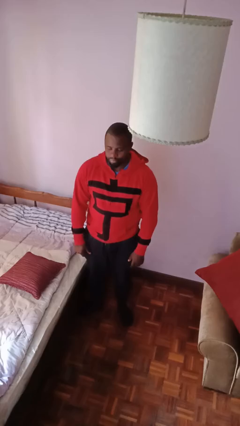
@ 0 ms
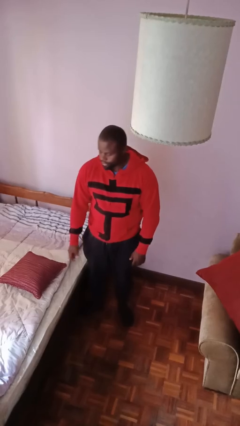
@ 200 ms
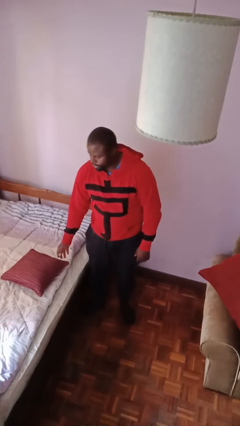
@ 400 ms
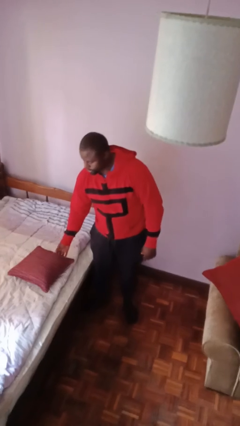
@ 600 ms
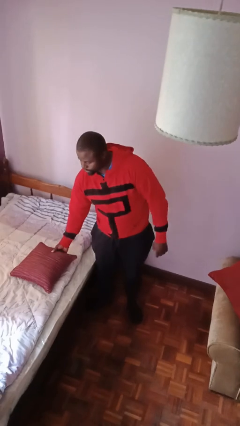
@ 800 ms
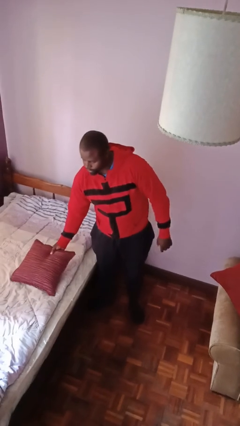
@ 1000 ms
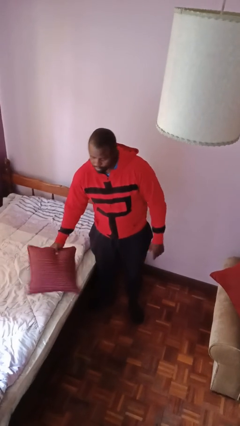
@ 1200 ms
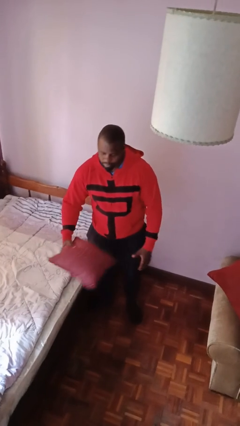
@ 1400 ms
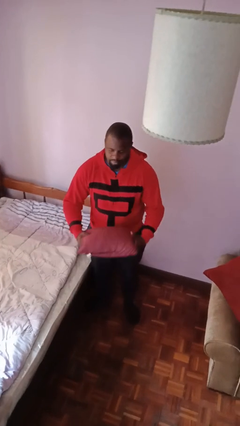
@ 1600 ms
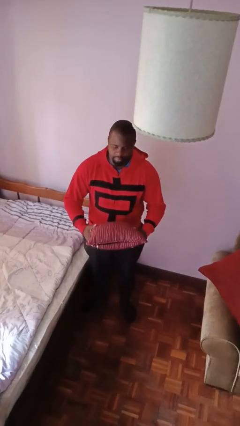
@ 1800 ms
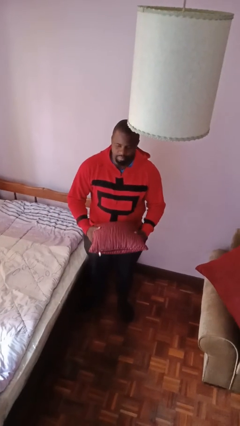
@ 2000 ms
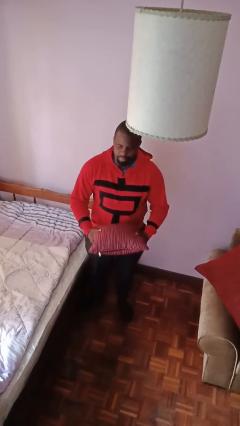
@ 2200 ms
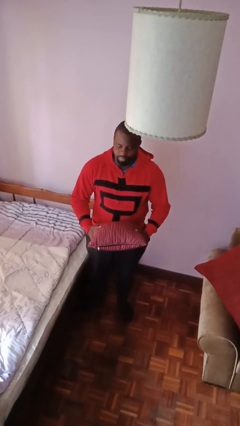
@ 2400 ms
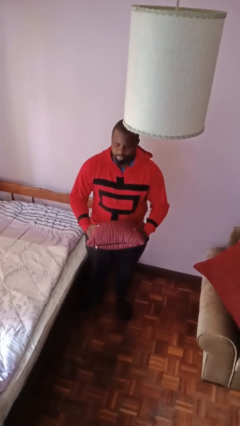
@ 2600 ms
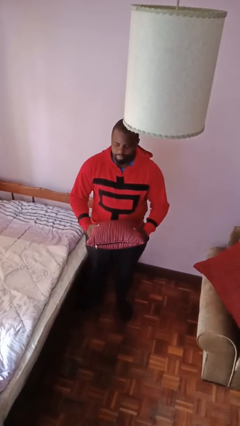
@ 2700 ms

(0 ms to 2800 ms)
person picks up object from bed

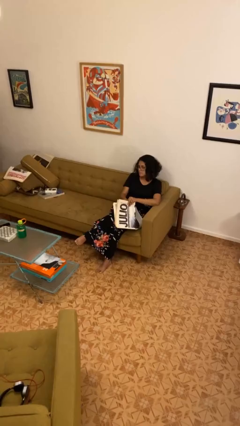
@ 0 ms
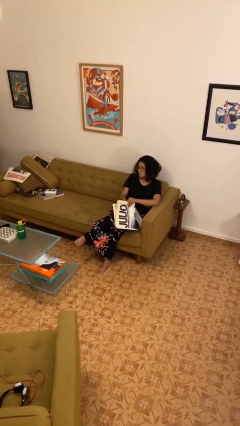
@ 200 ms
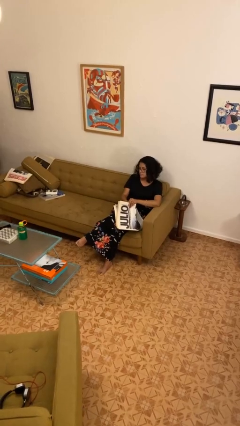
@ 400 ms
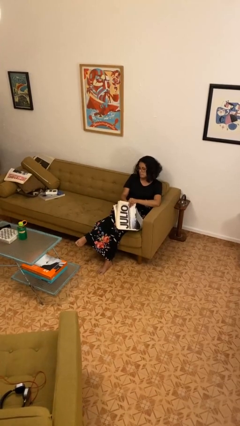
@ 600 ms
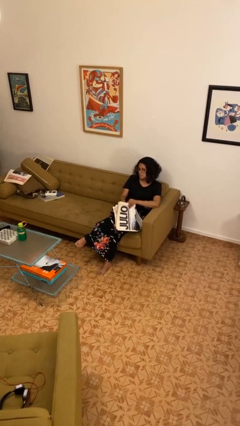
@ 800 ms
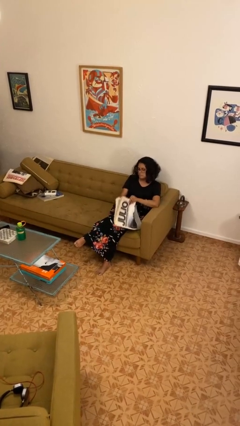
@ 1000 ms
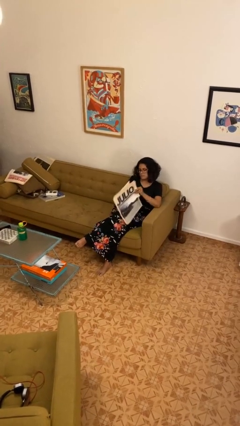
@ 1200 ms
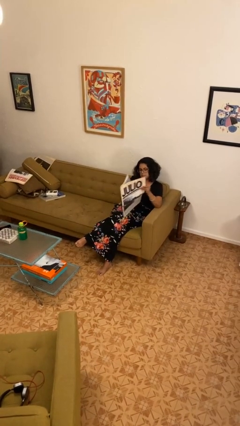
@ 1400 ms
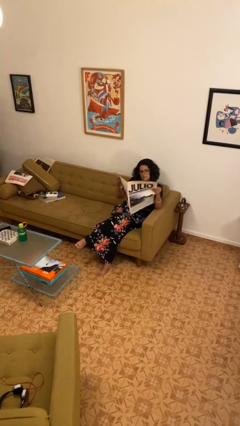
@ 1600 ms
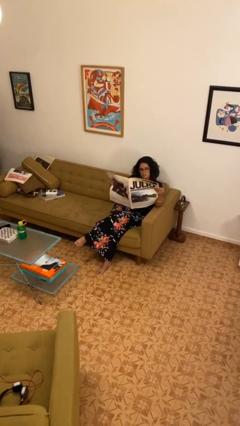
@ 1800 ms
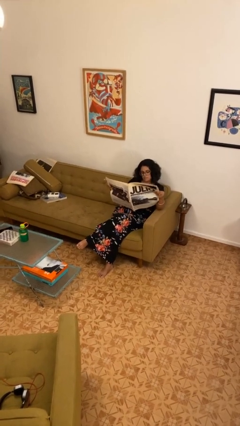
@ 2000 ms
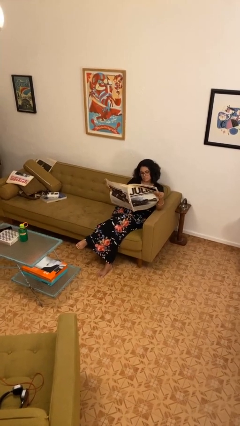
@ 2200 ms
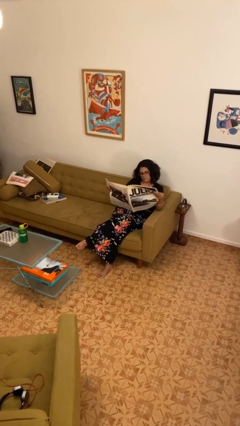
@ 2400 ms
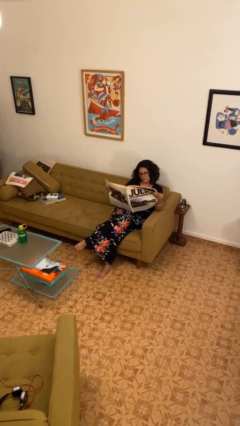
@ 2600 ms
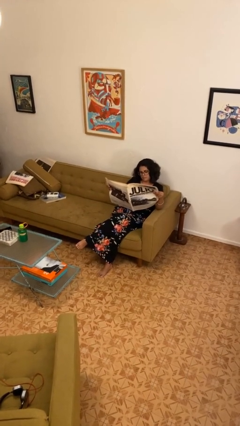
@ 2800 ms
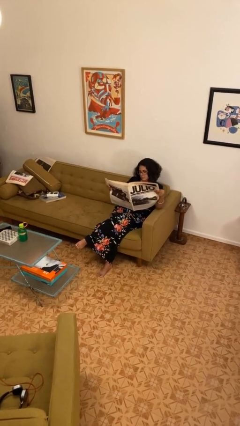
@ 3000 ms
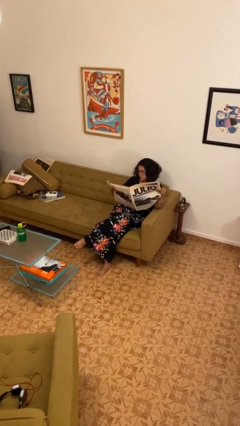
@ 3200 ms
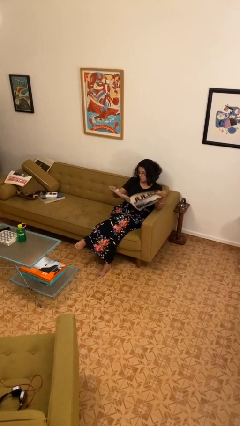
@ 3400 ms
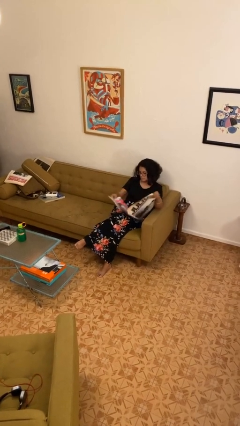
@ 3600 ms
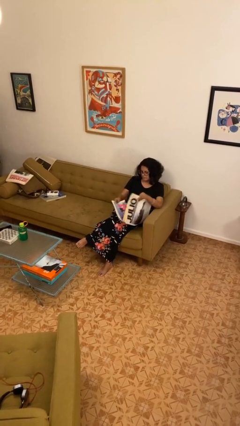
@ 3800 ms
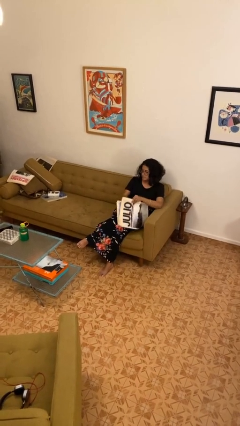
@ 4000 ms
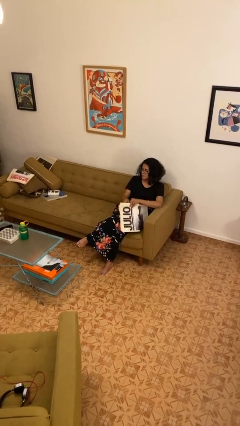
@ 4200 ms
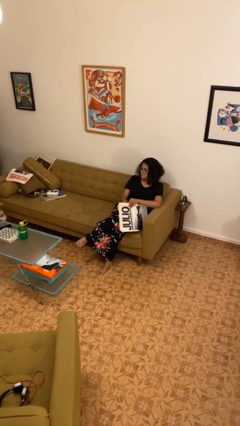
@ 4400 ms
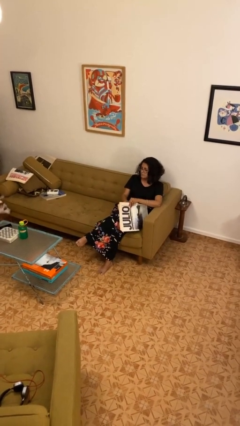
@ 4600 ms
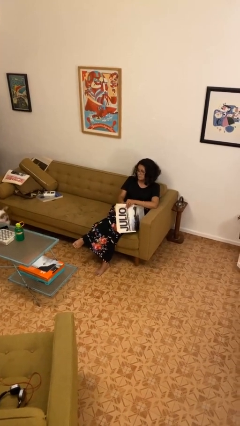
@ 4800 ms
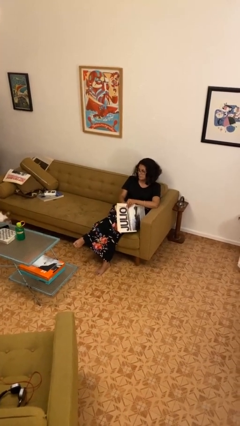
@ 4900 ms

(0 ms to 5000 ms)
person reads newspaper

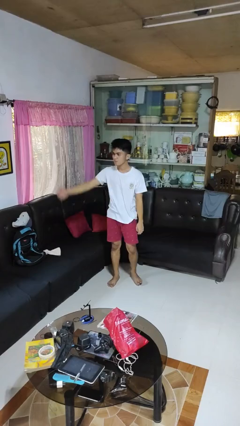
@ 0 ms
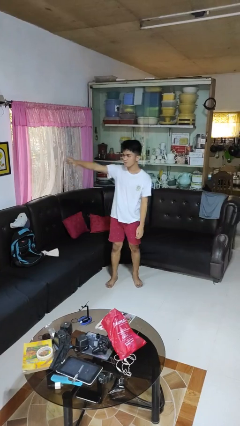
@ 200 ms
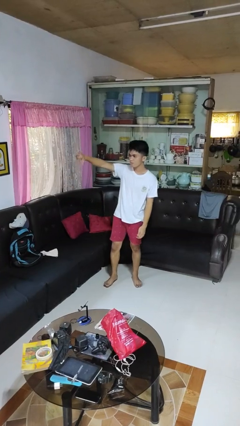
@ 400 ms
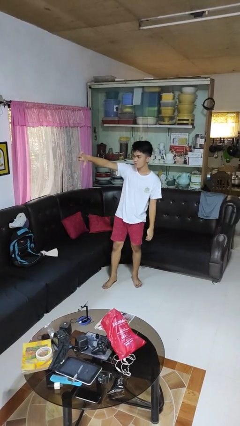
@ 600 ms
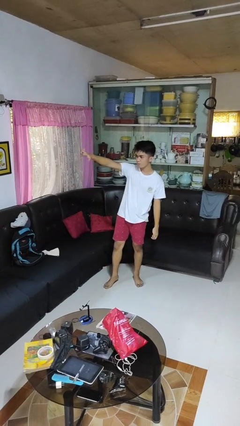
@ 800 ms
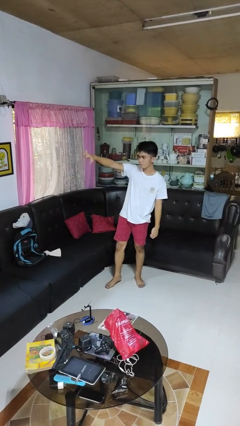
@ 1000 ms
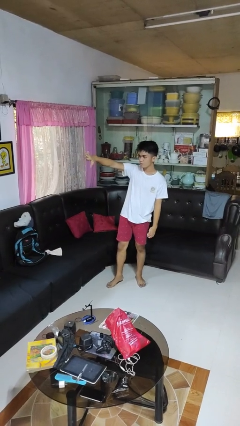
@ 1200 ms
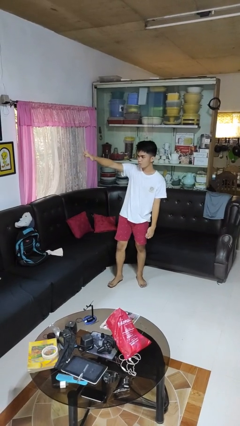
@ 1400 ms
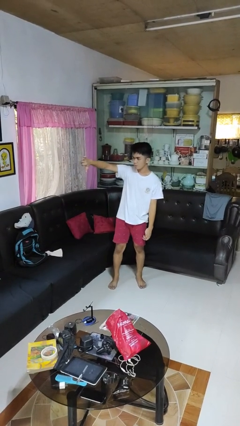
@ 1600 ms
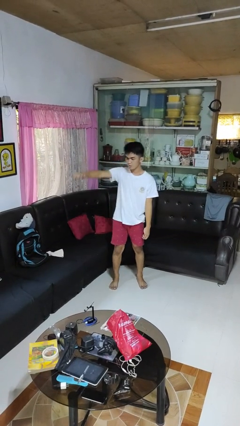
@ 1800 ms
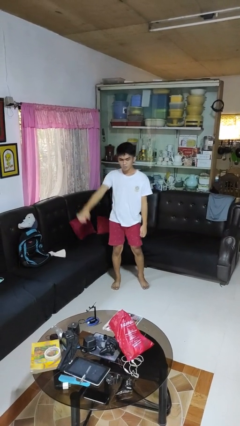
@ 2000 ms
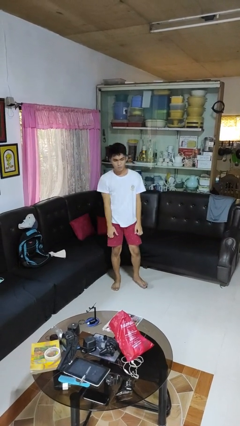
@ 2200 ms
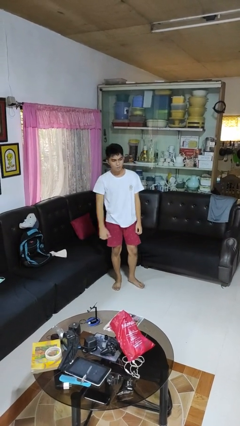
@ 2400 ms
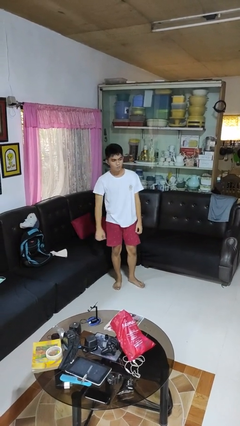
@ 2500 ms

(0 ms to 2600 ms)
person gestures thumbs down

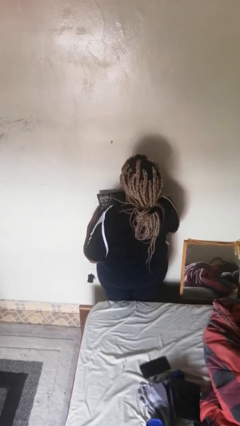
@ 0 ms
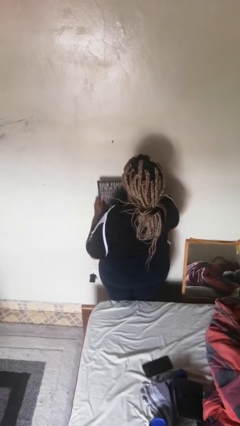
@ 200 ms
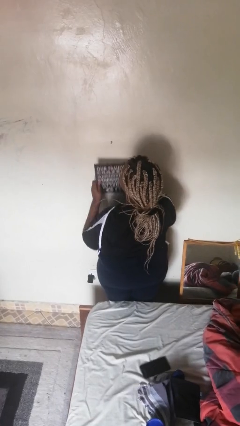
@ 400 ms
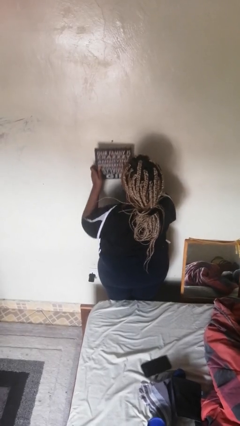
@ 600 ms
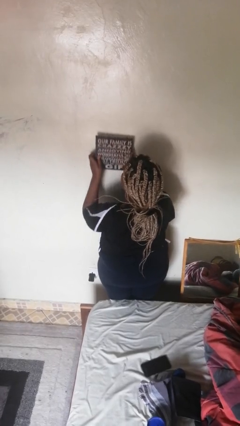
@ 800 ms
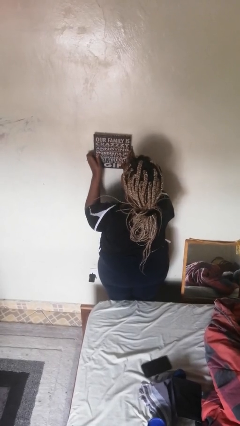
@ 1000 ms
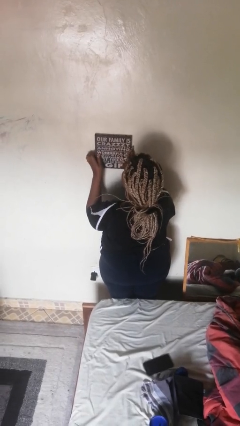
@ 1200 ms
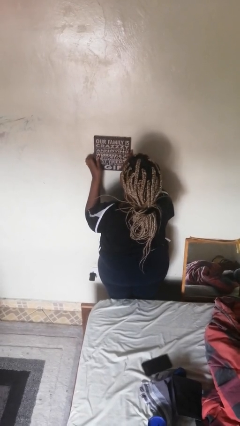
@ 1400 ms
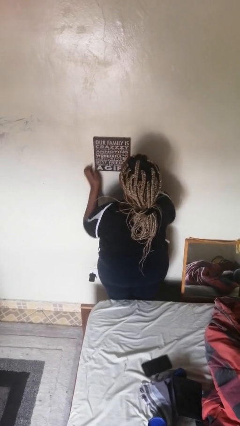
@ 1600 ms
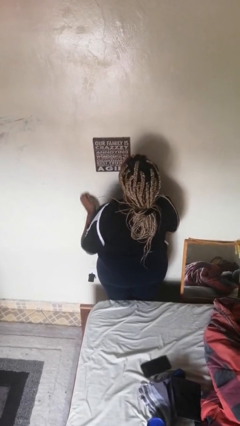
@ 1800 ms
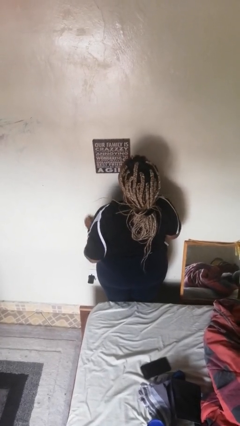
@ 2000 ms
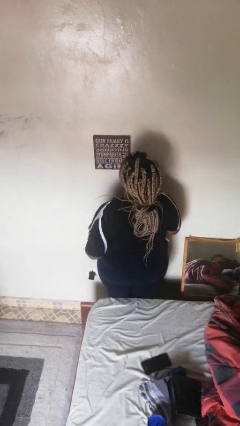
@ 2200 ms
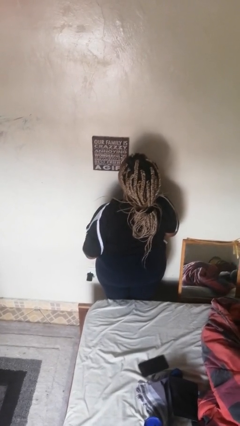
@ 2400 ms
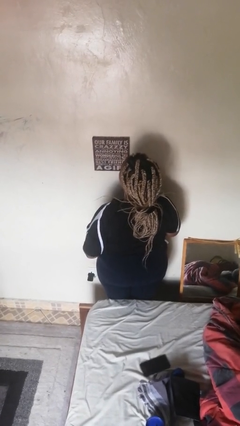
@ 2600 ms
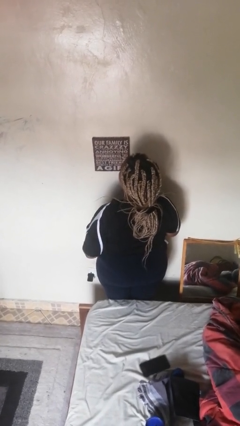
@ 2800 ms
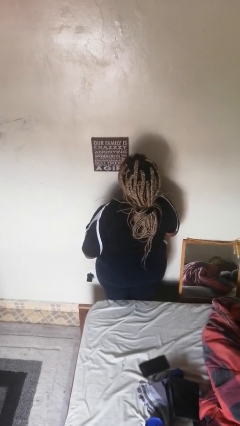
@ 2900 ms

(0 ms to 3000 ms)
person puts up picture frame

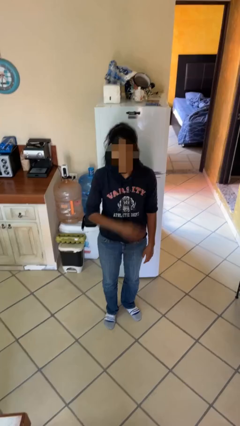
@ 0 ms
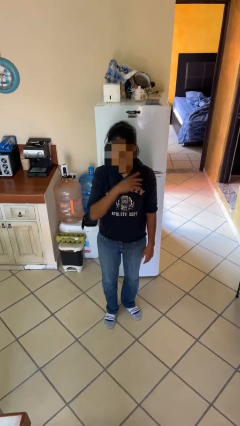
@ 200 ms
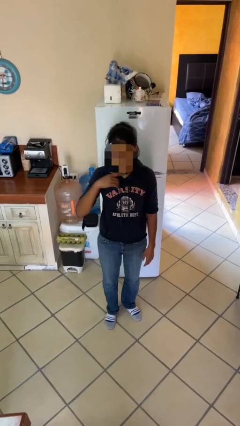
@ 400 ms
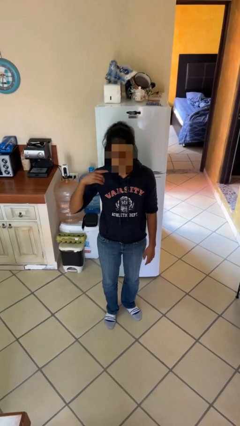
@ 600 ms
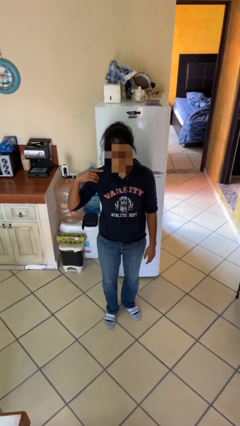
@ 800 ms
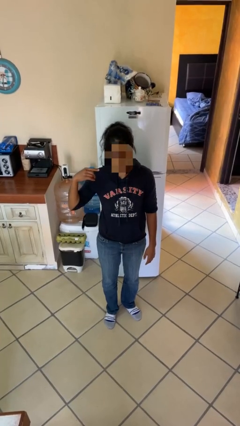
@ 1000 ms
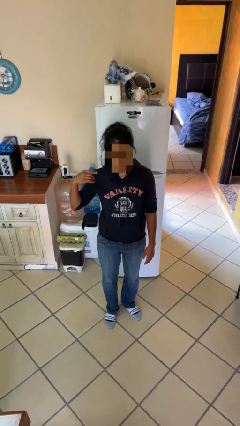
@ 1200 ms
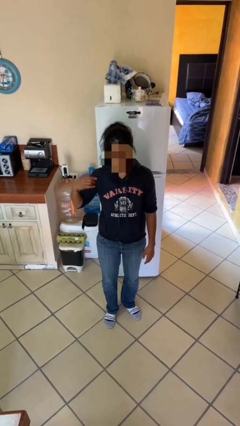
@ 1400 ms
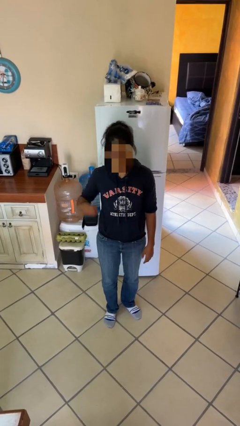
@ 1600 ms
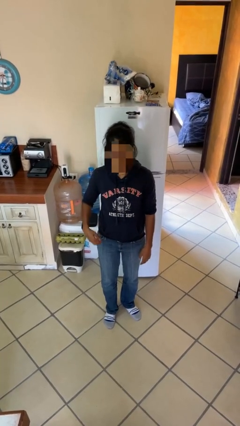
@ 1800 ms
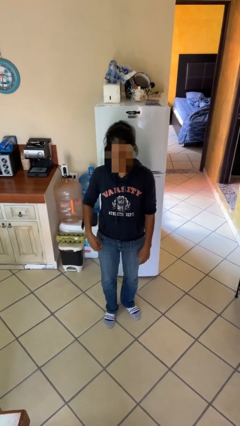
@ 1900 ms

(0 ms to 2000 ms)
person gestures cut

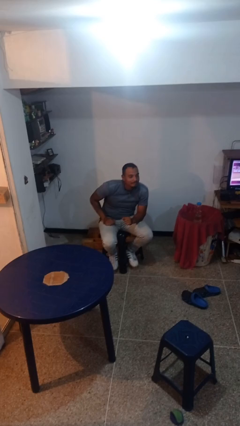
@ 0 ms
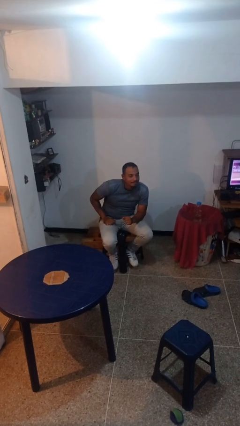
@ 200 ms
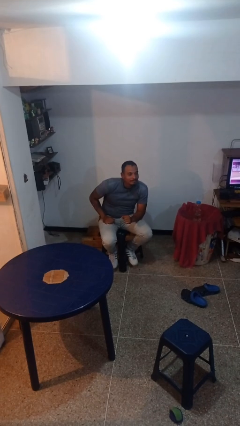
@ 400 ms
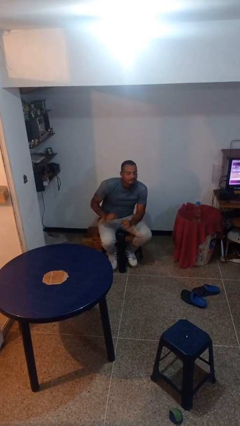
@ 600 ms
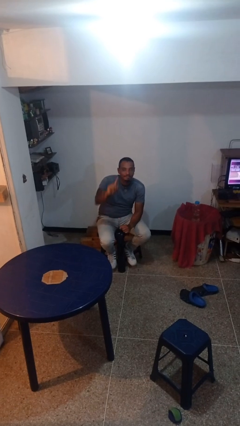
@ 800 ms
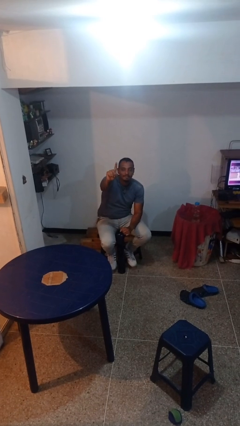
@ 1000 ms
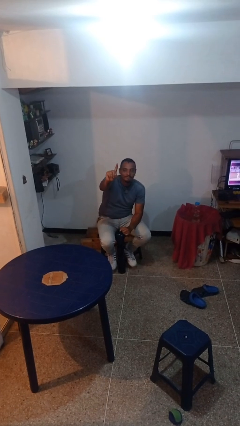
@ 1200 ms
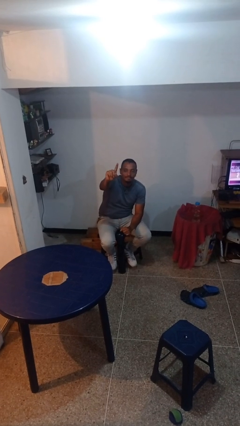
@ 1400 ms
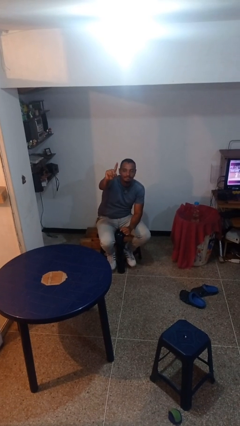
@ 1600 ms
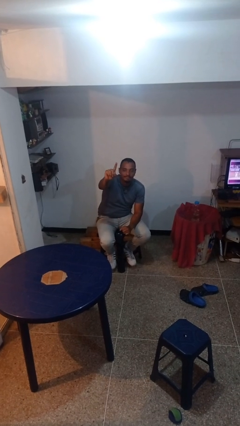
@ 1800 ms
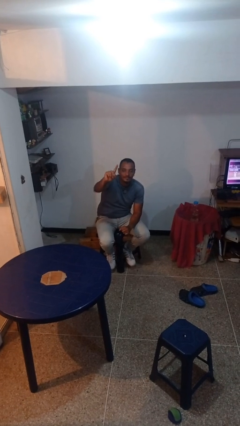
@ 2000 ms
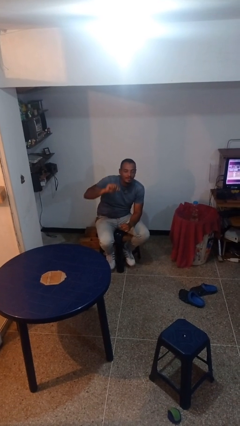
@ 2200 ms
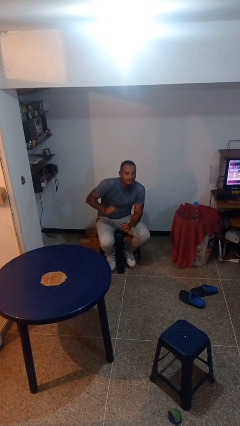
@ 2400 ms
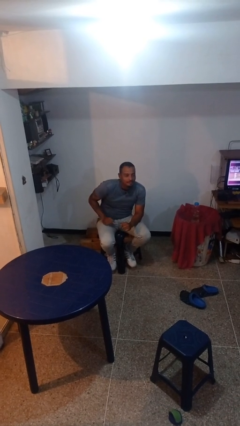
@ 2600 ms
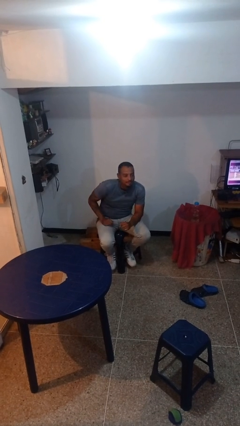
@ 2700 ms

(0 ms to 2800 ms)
person gestures number one
